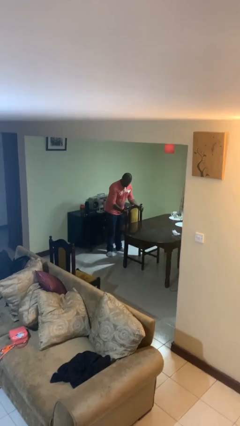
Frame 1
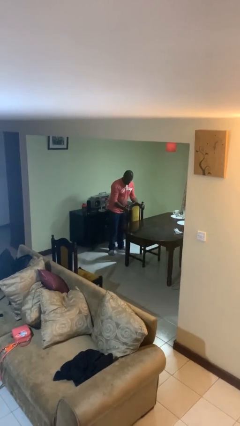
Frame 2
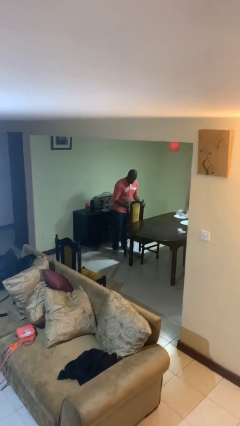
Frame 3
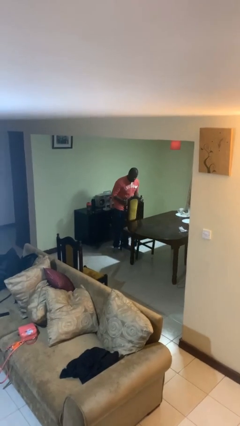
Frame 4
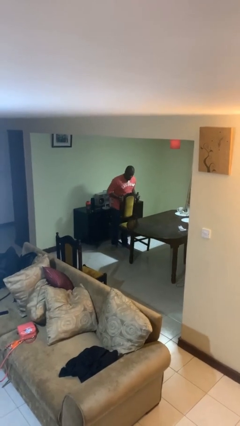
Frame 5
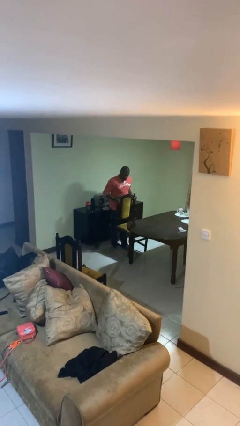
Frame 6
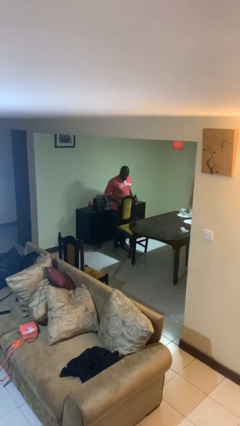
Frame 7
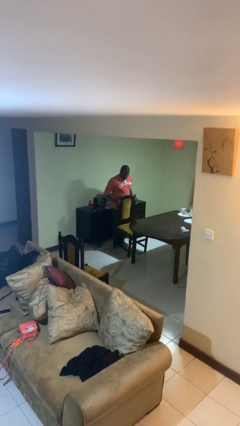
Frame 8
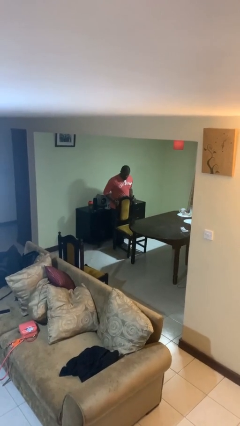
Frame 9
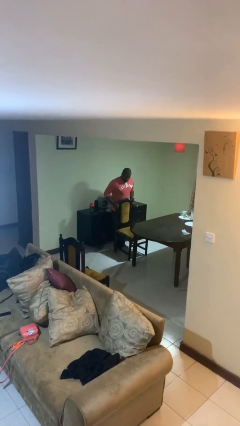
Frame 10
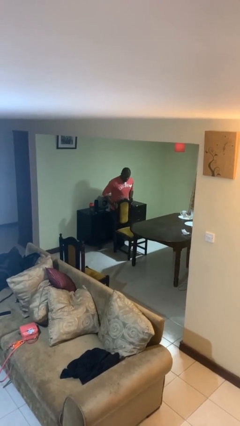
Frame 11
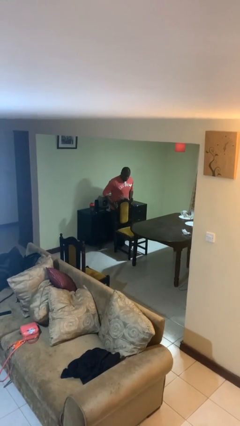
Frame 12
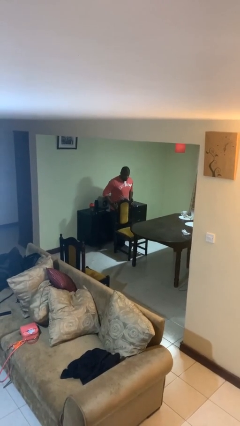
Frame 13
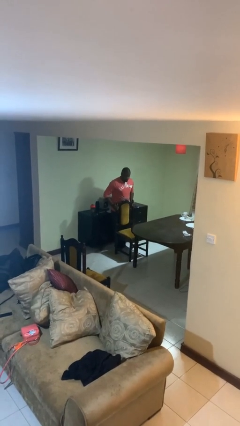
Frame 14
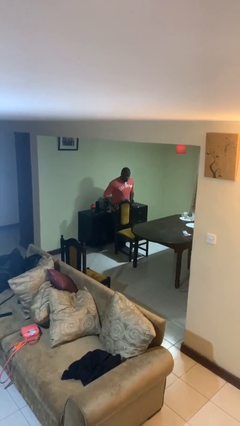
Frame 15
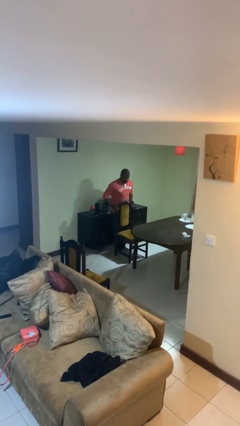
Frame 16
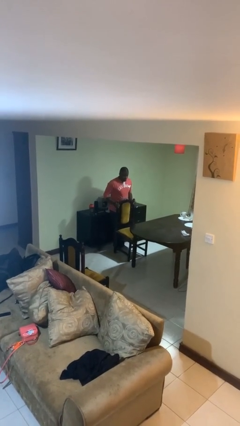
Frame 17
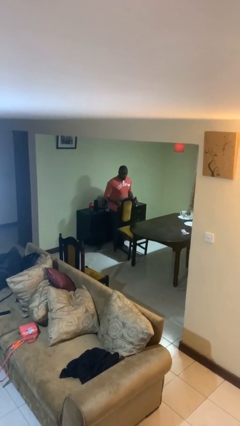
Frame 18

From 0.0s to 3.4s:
person pulls out chair

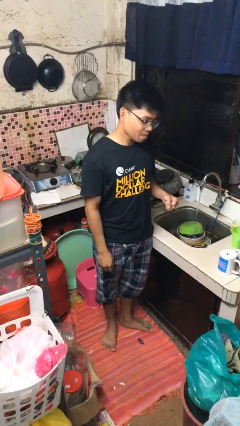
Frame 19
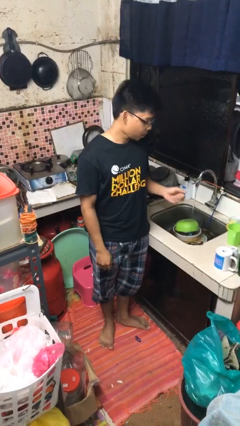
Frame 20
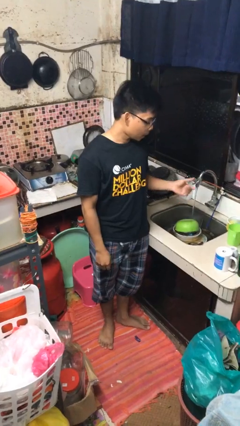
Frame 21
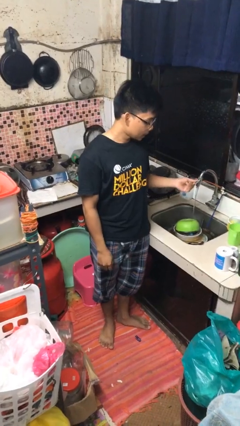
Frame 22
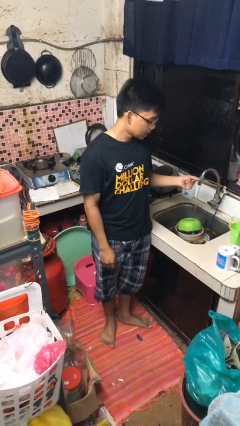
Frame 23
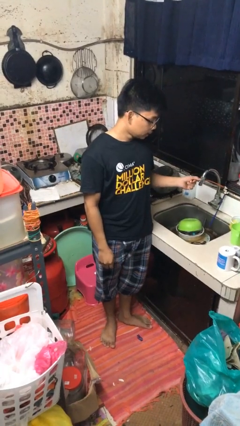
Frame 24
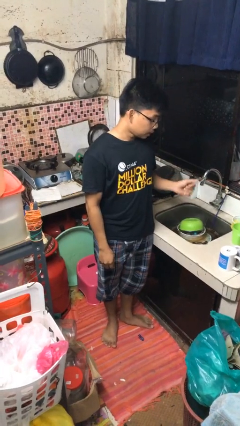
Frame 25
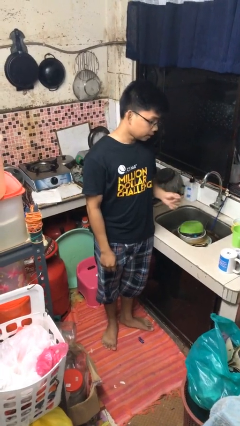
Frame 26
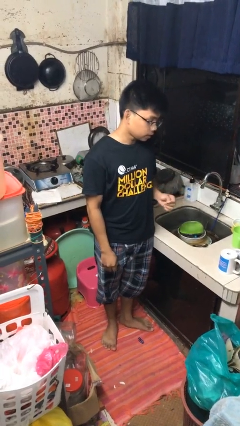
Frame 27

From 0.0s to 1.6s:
person turns off faucet

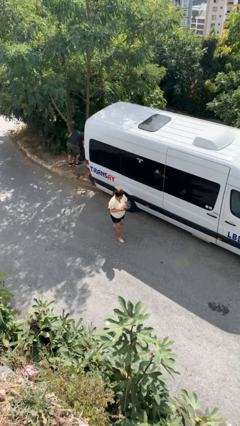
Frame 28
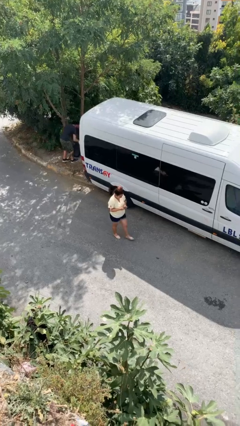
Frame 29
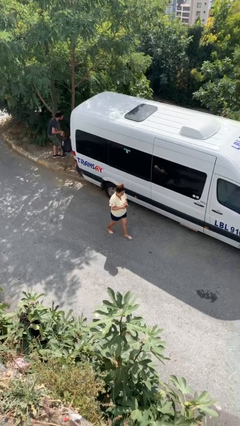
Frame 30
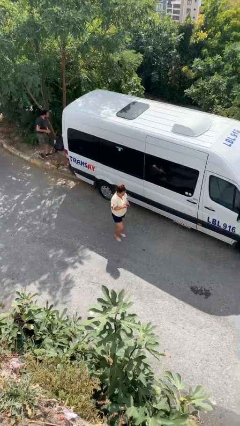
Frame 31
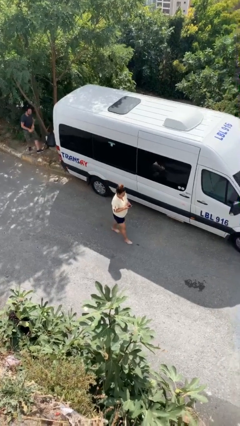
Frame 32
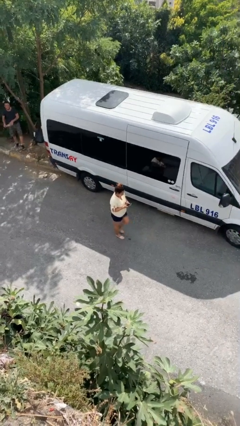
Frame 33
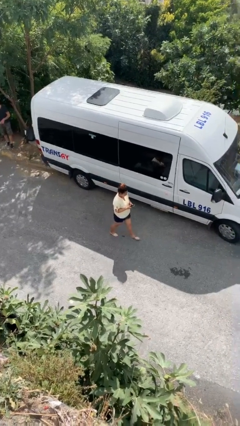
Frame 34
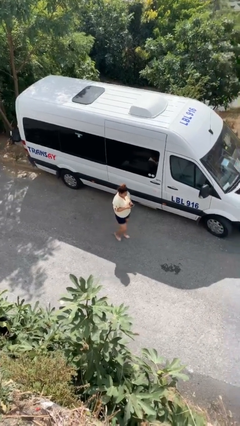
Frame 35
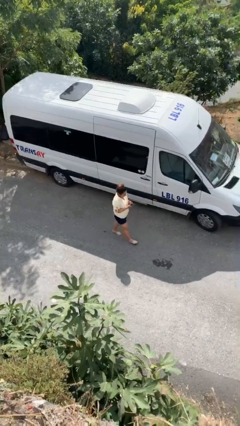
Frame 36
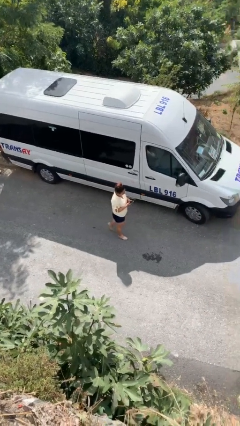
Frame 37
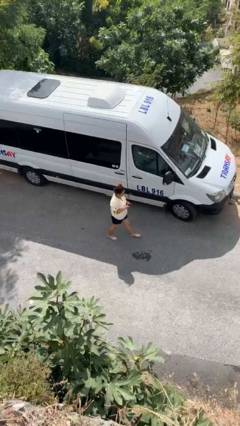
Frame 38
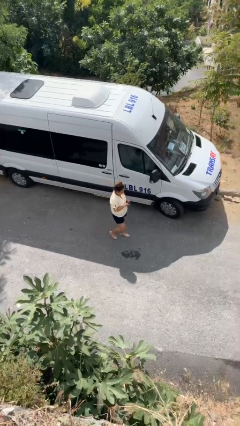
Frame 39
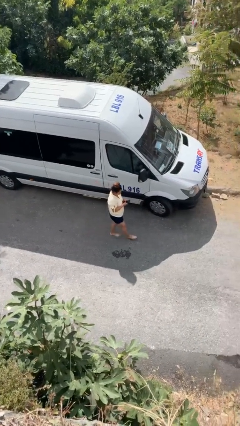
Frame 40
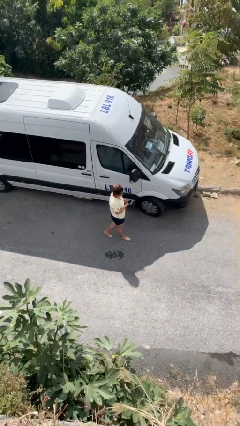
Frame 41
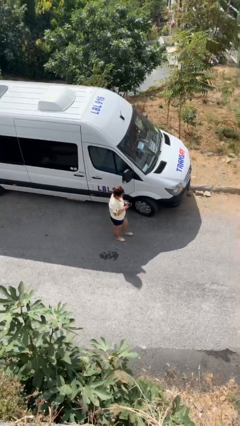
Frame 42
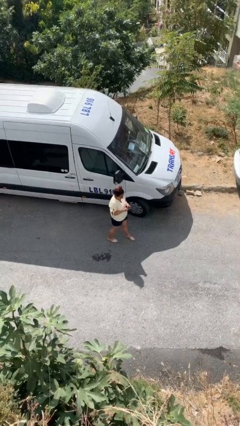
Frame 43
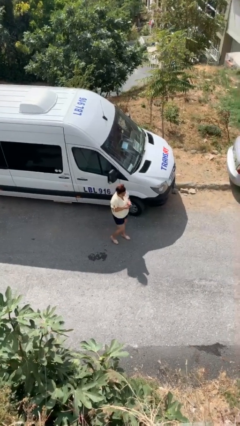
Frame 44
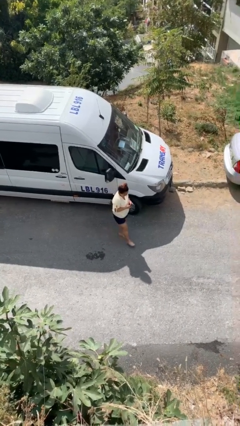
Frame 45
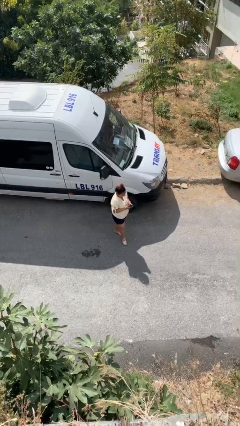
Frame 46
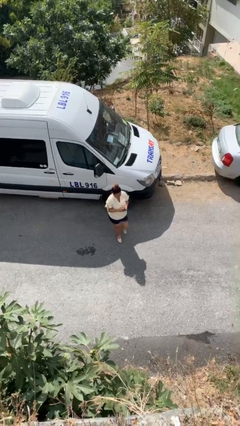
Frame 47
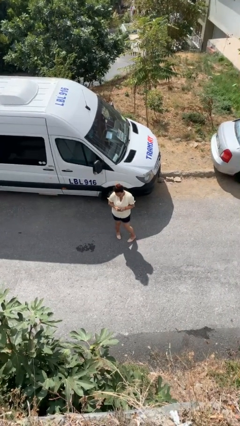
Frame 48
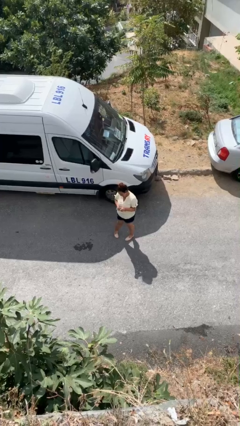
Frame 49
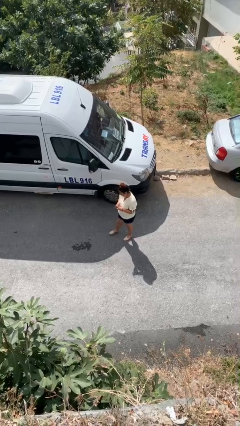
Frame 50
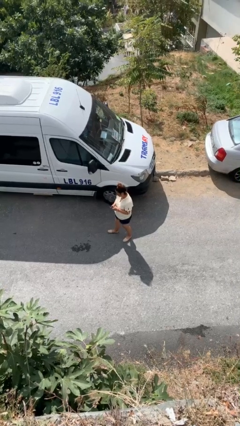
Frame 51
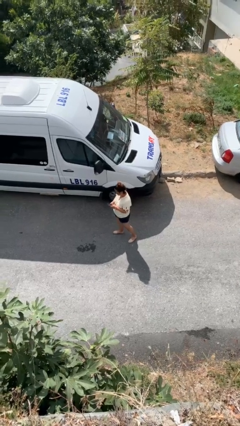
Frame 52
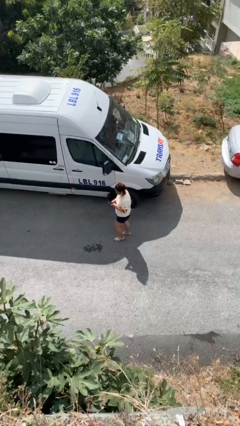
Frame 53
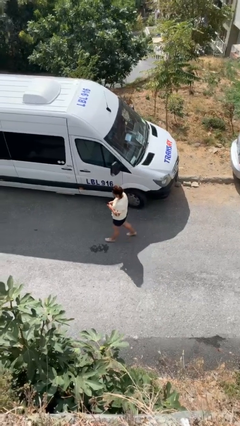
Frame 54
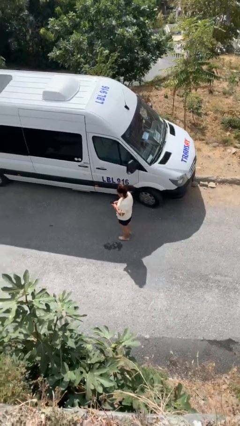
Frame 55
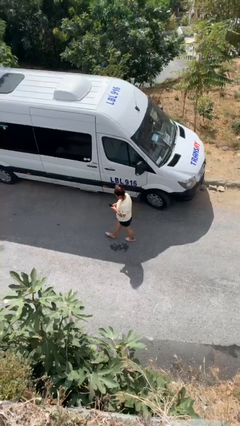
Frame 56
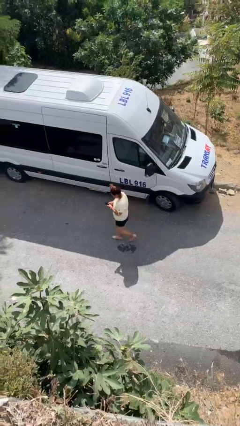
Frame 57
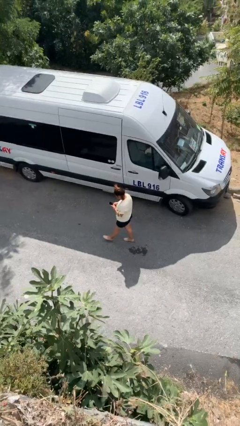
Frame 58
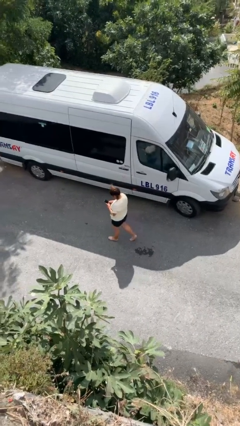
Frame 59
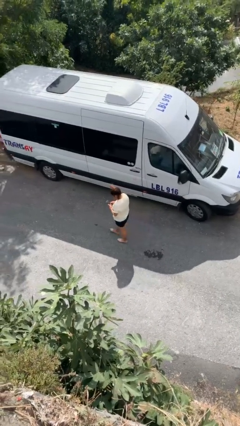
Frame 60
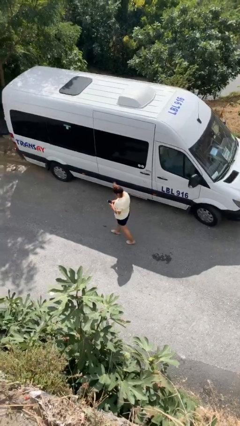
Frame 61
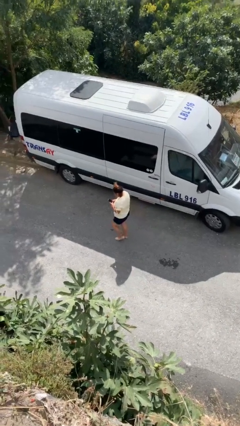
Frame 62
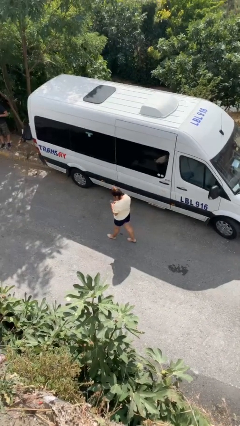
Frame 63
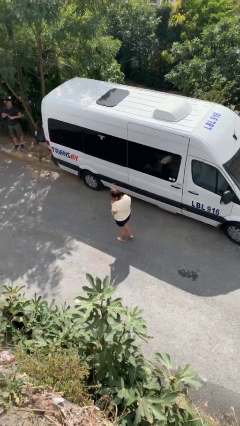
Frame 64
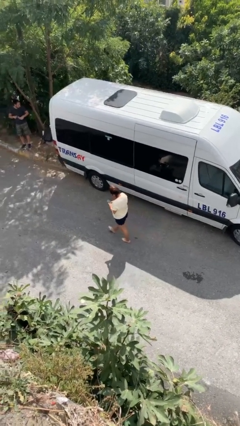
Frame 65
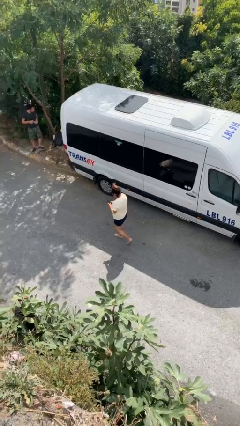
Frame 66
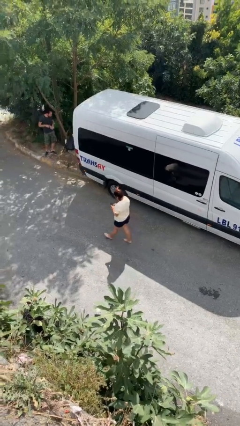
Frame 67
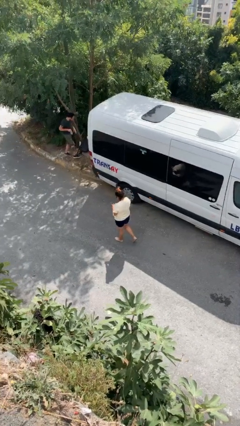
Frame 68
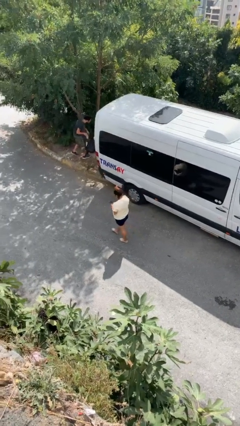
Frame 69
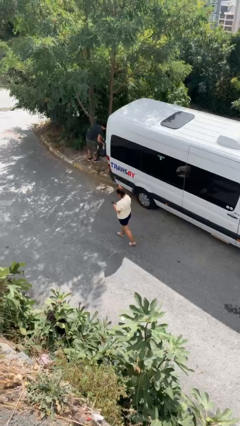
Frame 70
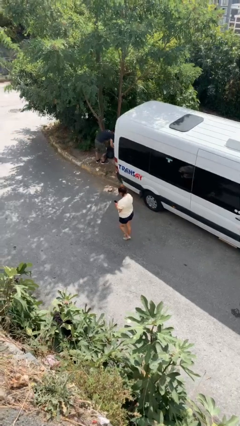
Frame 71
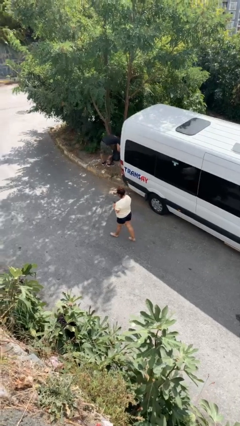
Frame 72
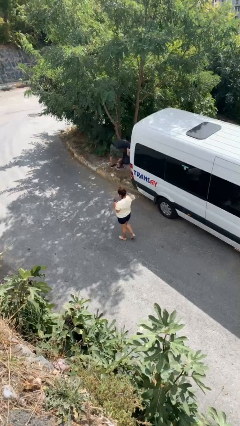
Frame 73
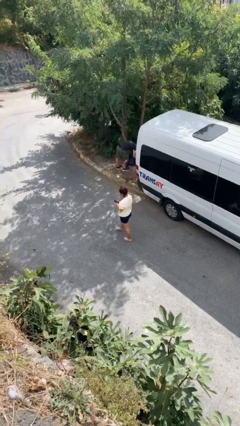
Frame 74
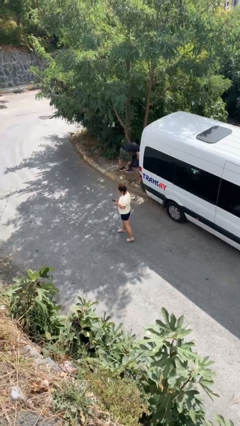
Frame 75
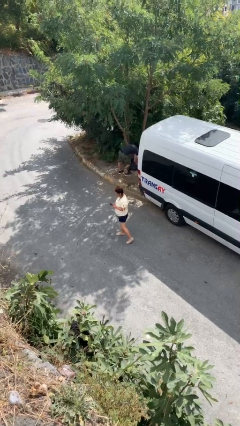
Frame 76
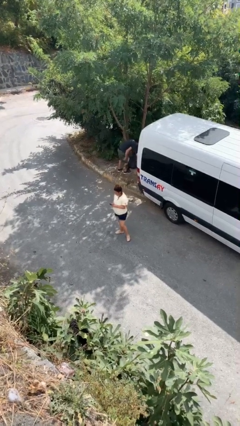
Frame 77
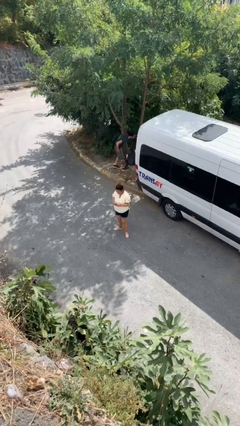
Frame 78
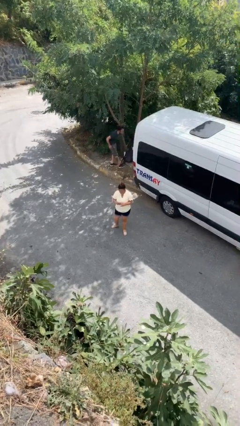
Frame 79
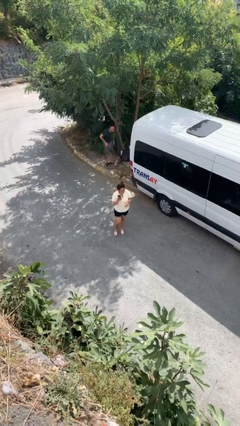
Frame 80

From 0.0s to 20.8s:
person texts on phone

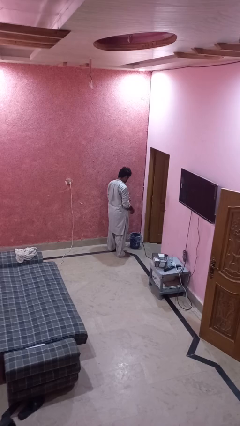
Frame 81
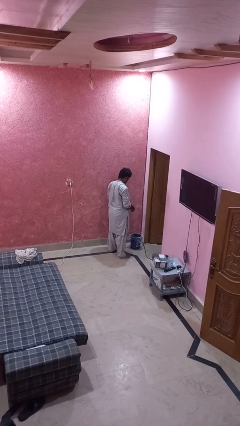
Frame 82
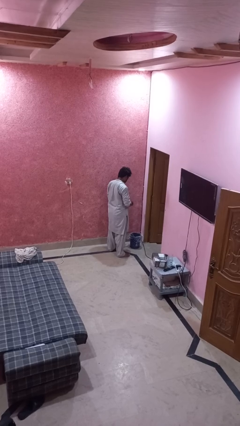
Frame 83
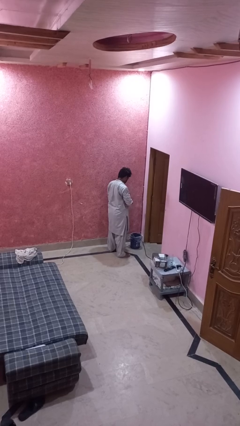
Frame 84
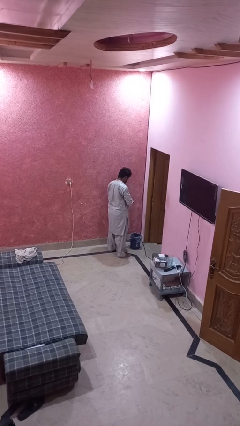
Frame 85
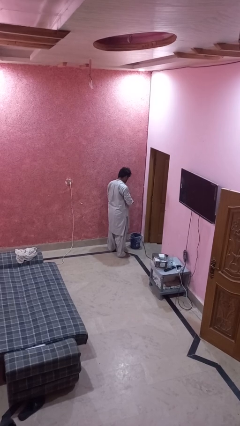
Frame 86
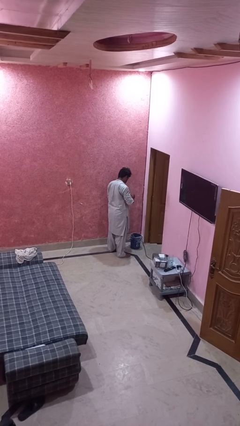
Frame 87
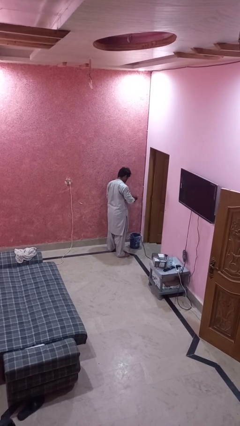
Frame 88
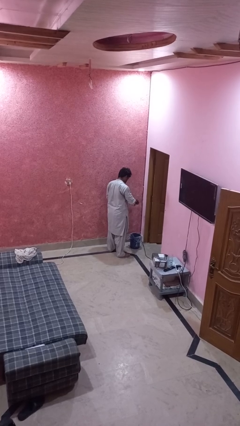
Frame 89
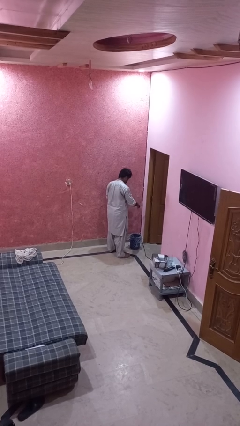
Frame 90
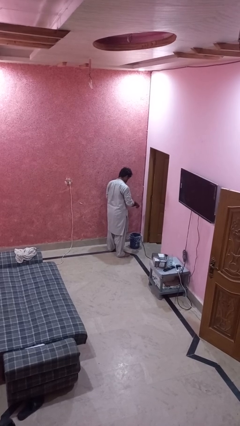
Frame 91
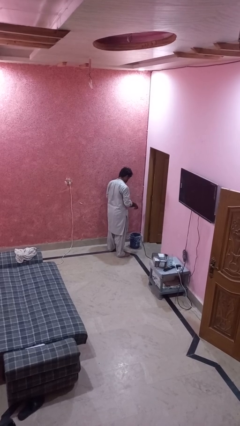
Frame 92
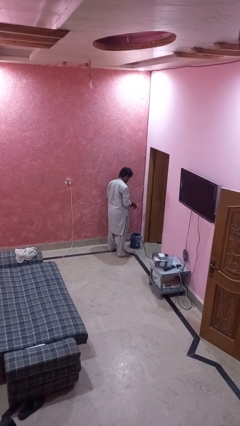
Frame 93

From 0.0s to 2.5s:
person discards trash
